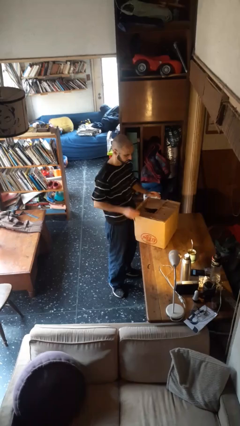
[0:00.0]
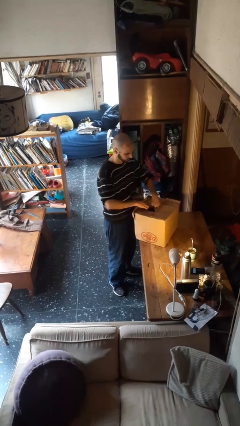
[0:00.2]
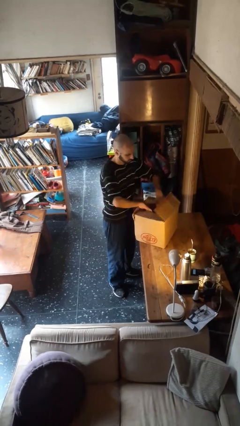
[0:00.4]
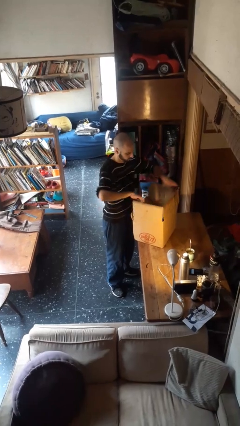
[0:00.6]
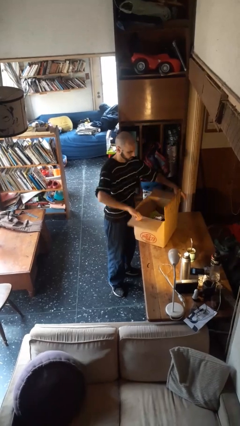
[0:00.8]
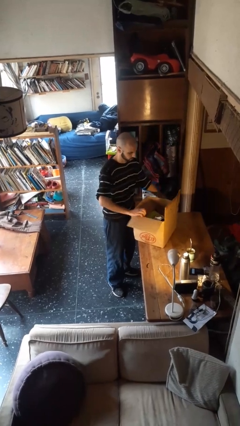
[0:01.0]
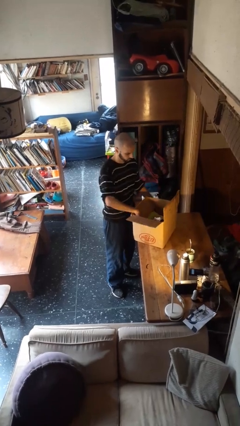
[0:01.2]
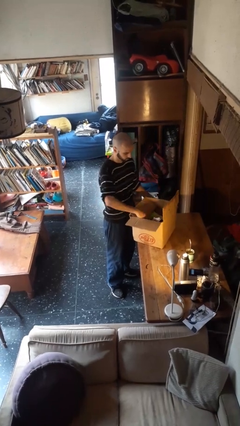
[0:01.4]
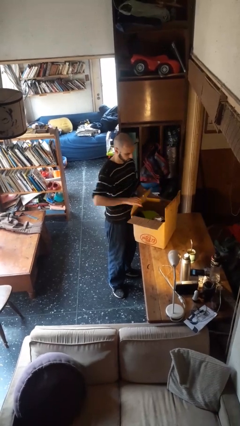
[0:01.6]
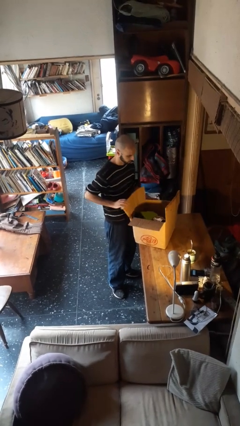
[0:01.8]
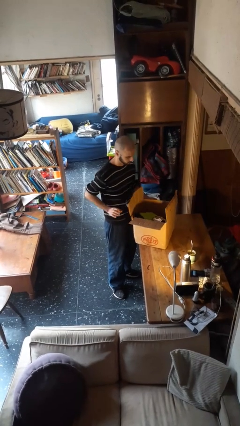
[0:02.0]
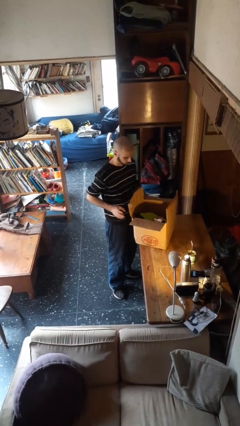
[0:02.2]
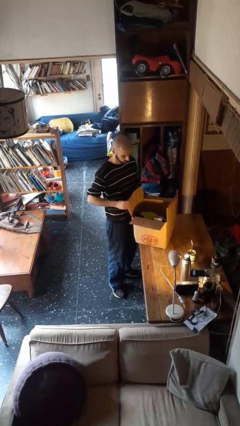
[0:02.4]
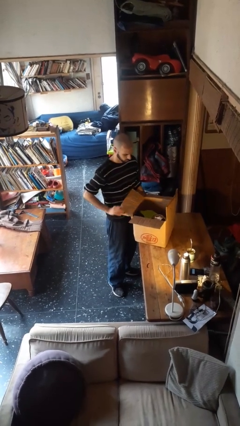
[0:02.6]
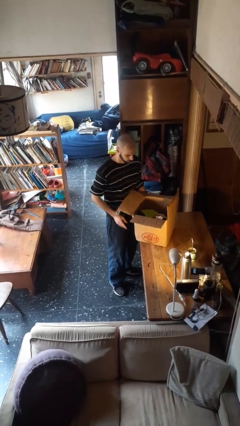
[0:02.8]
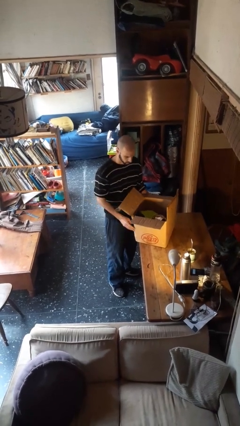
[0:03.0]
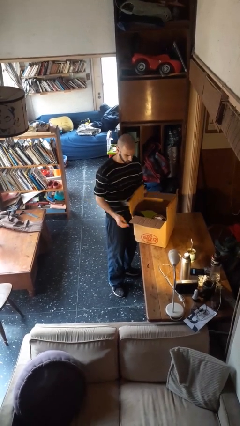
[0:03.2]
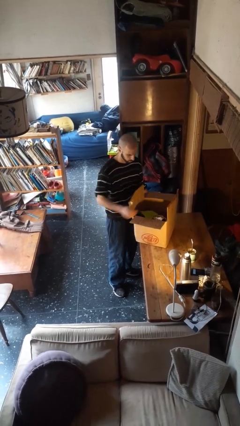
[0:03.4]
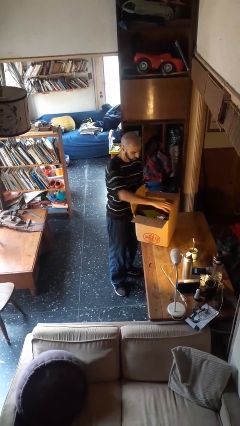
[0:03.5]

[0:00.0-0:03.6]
person opens box

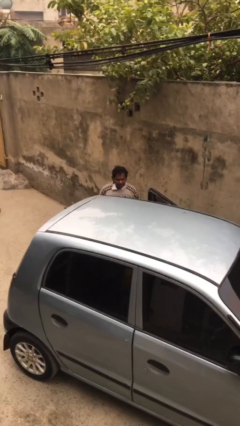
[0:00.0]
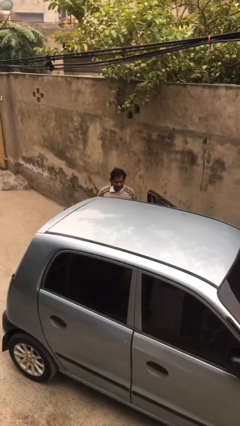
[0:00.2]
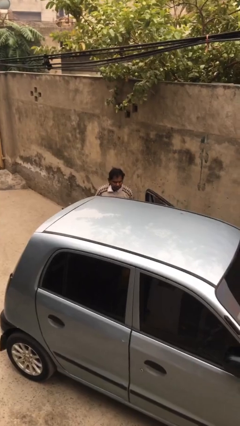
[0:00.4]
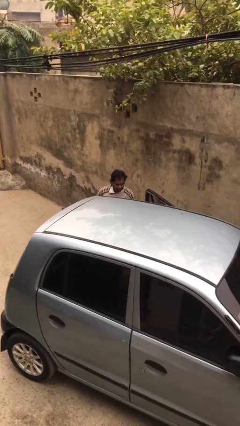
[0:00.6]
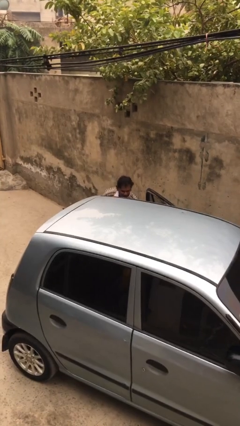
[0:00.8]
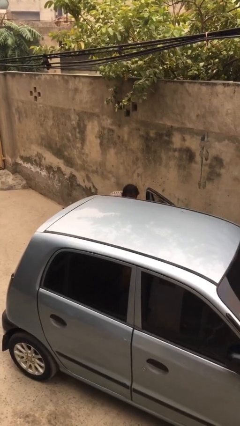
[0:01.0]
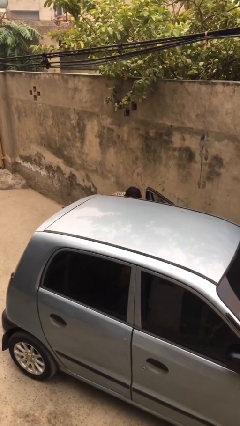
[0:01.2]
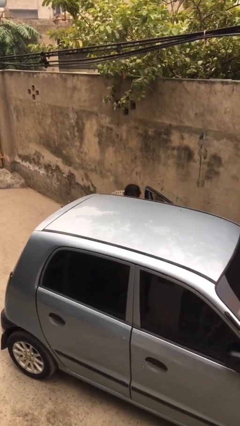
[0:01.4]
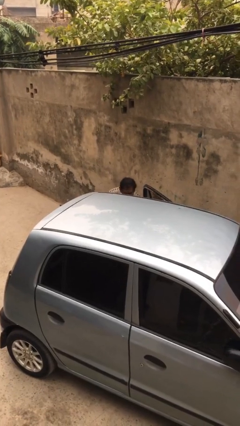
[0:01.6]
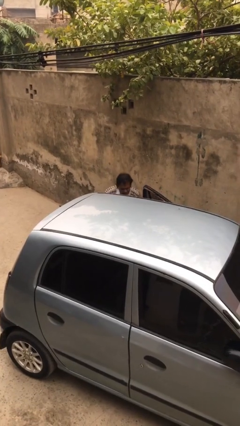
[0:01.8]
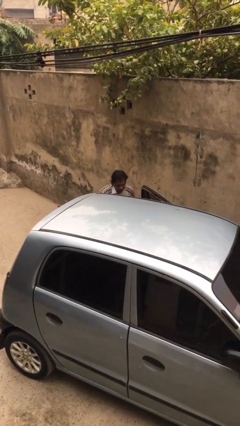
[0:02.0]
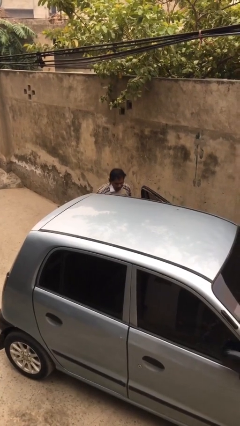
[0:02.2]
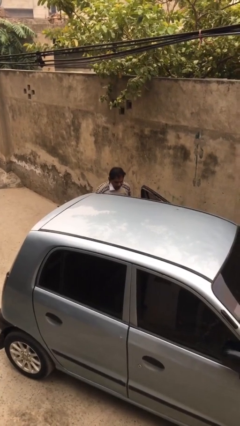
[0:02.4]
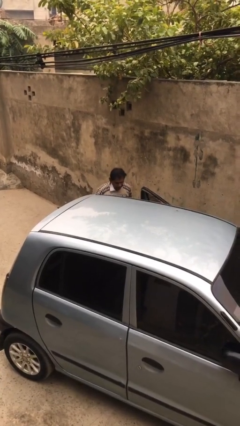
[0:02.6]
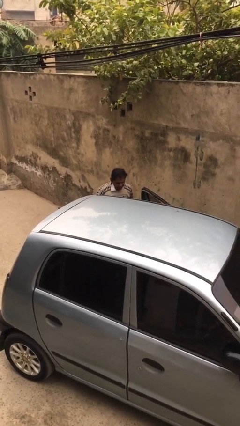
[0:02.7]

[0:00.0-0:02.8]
person loads car

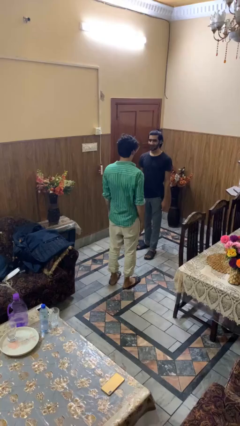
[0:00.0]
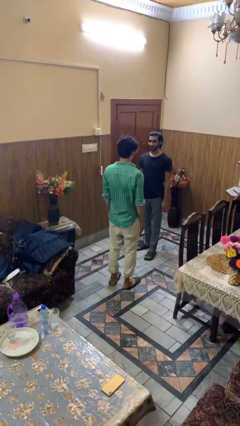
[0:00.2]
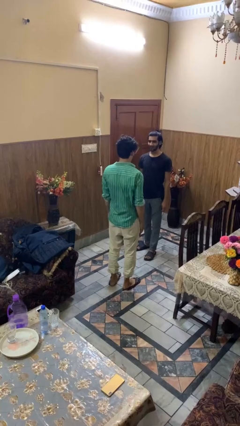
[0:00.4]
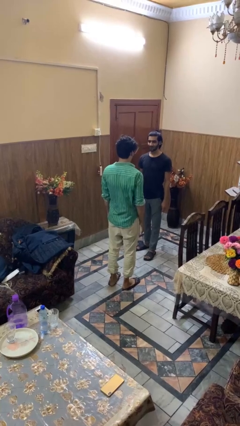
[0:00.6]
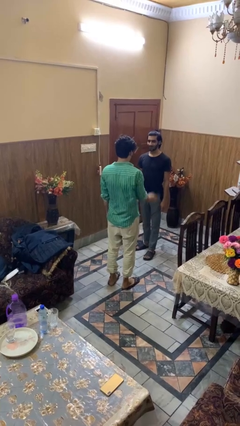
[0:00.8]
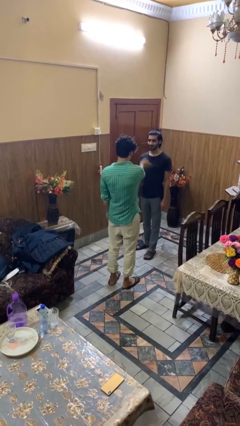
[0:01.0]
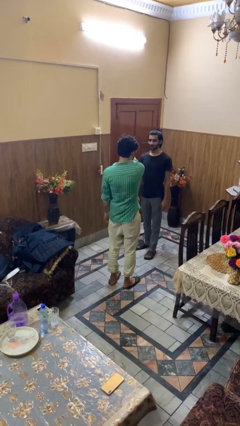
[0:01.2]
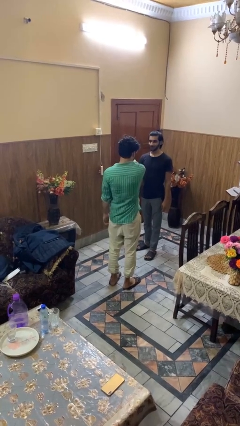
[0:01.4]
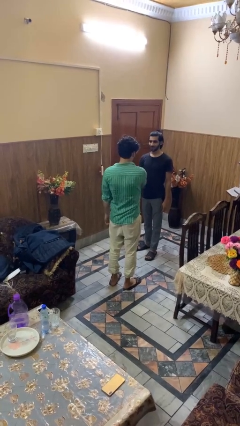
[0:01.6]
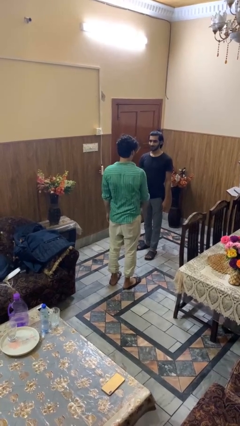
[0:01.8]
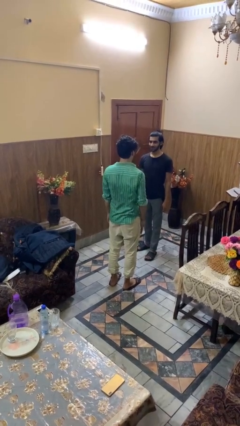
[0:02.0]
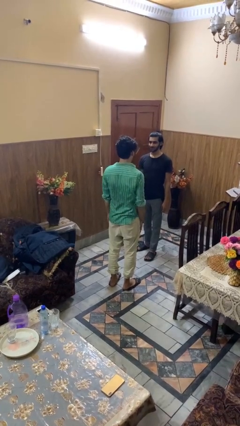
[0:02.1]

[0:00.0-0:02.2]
person shoves person

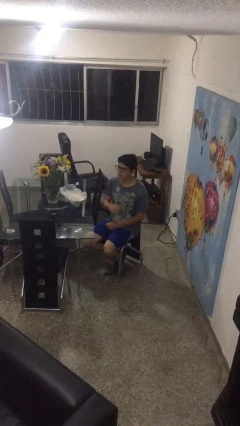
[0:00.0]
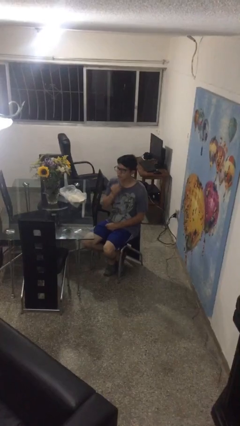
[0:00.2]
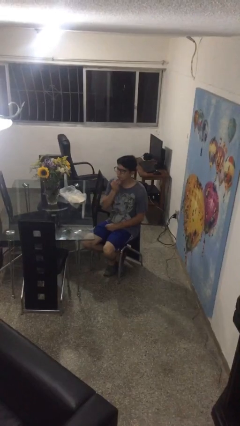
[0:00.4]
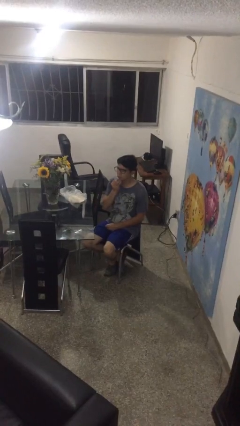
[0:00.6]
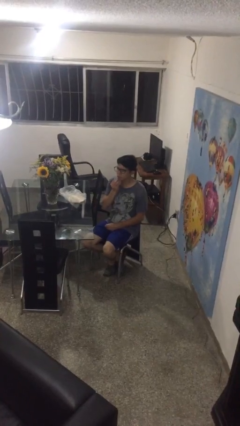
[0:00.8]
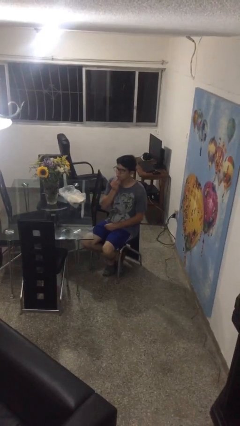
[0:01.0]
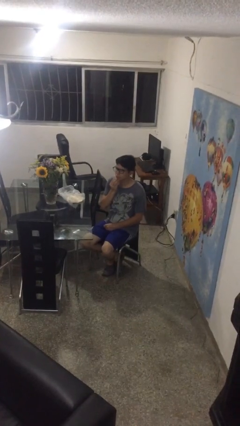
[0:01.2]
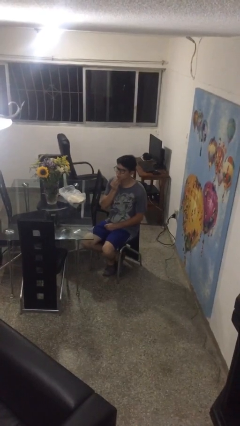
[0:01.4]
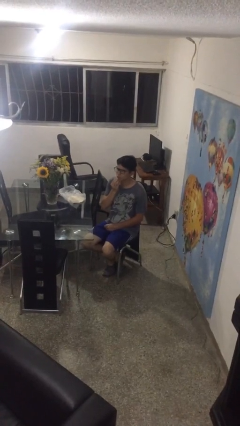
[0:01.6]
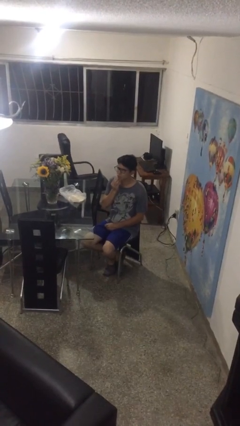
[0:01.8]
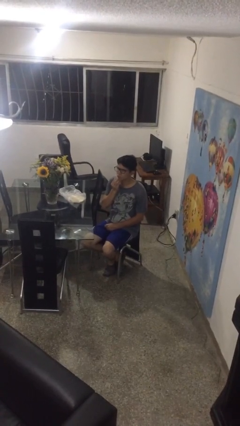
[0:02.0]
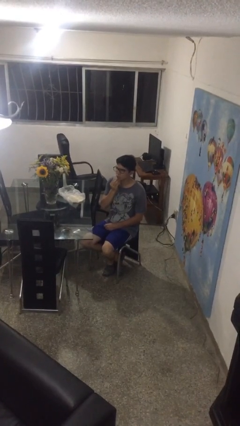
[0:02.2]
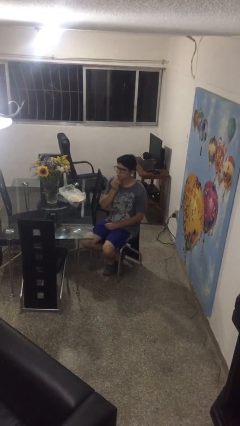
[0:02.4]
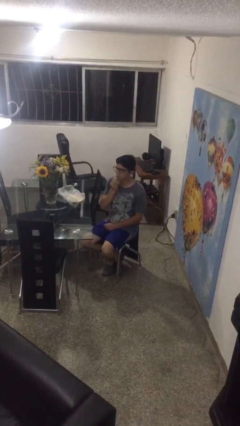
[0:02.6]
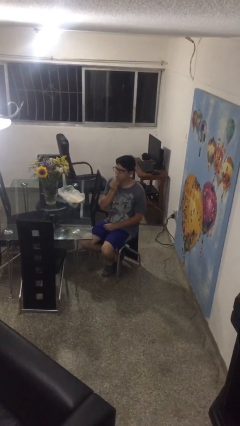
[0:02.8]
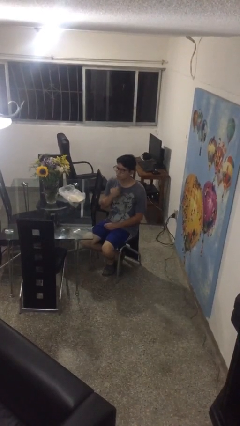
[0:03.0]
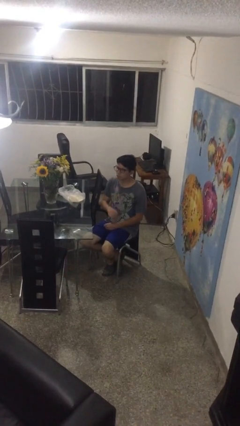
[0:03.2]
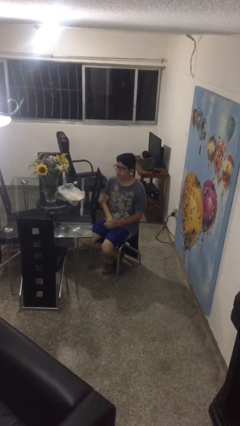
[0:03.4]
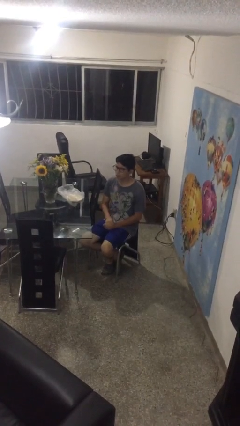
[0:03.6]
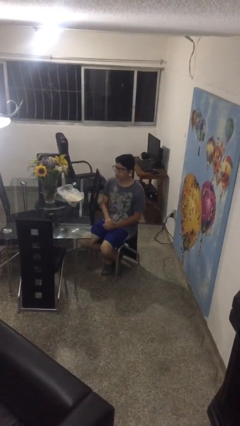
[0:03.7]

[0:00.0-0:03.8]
person strokes chin

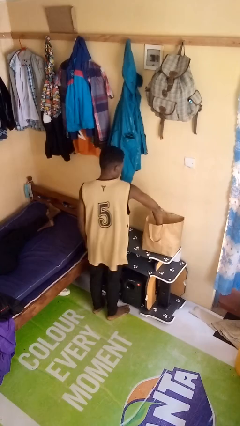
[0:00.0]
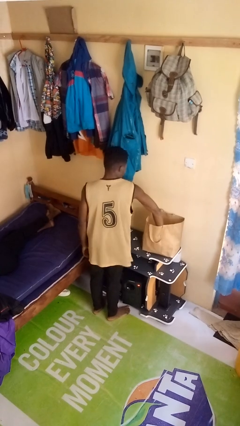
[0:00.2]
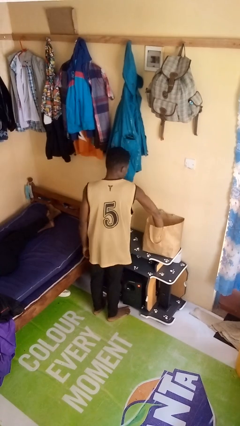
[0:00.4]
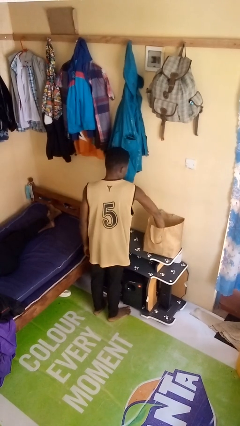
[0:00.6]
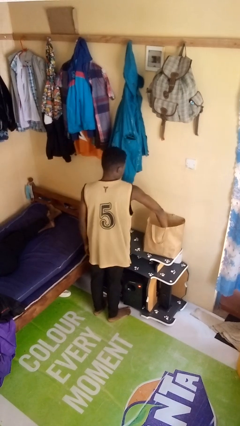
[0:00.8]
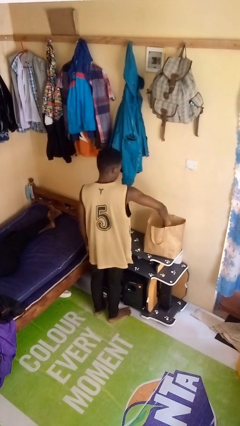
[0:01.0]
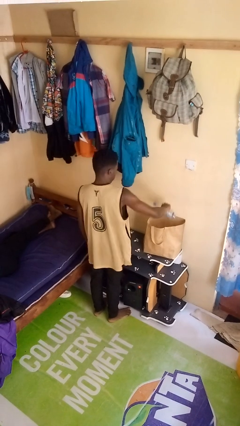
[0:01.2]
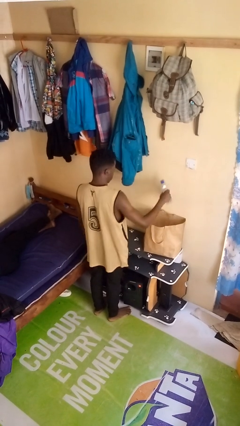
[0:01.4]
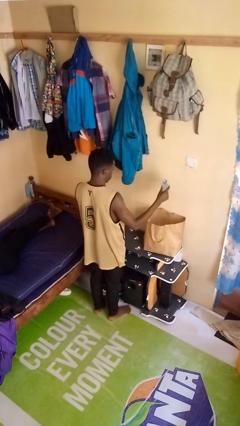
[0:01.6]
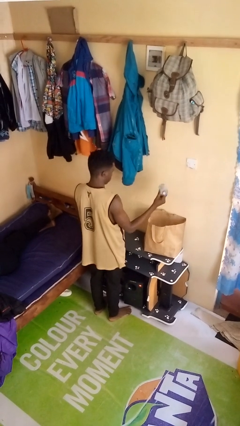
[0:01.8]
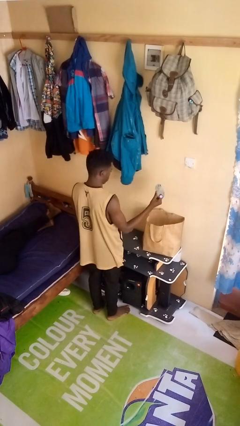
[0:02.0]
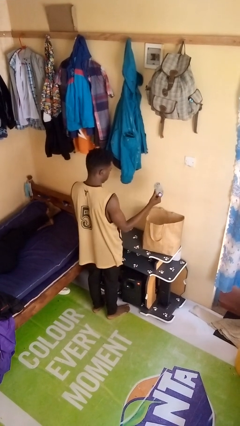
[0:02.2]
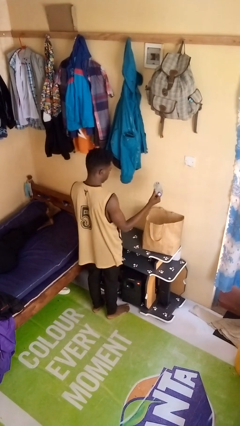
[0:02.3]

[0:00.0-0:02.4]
person takes object from bag

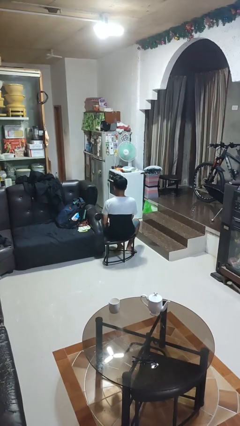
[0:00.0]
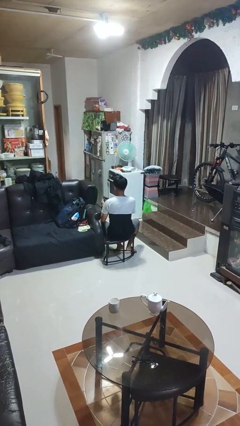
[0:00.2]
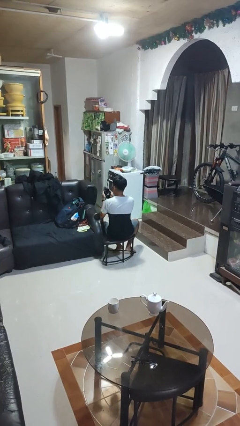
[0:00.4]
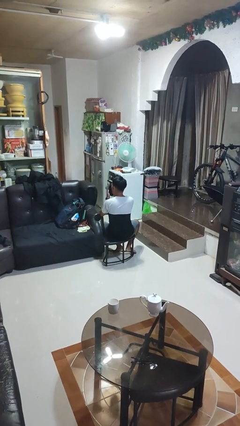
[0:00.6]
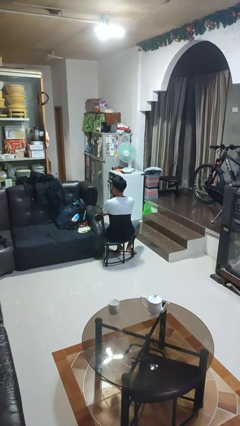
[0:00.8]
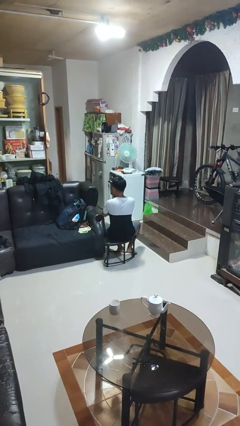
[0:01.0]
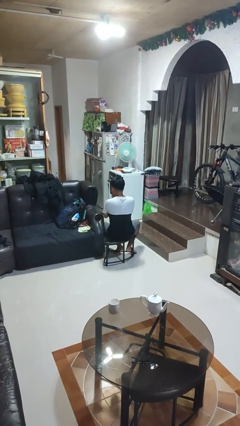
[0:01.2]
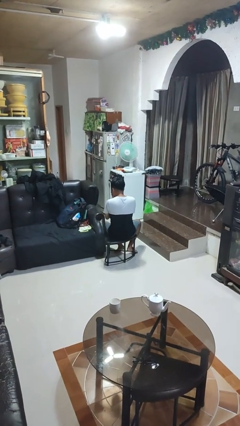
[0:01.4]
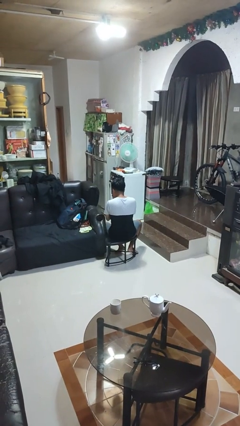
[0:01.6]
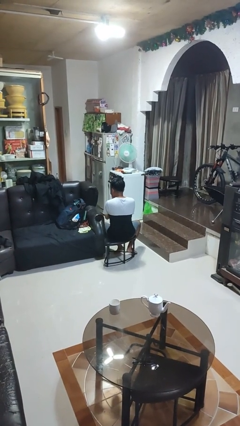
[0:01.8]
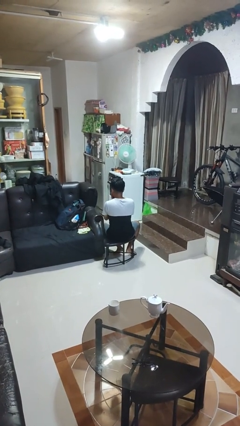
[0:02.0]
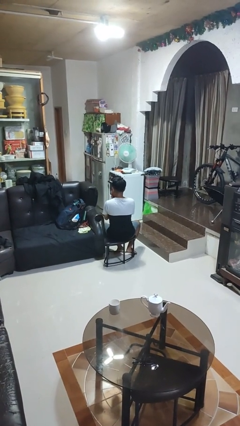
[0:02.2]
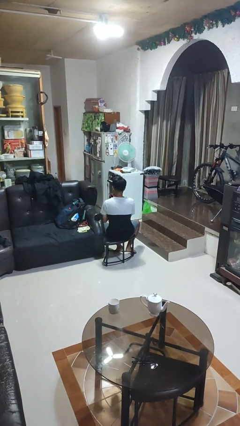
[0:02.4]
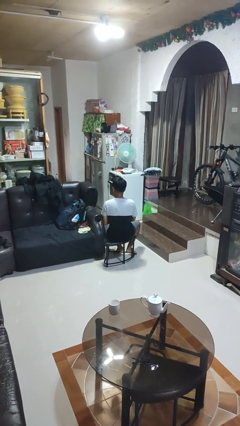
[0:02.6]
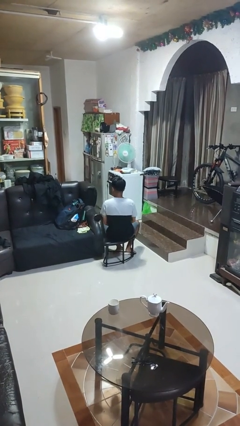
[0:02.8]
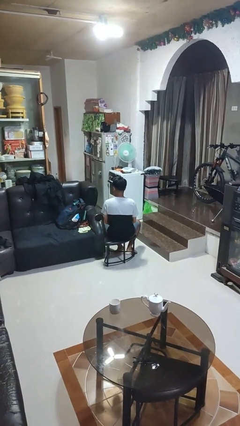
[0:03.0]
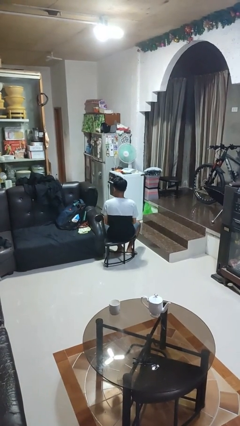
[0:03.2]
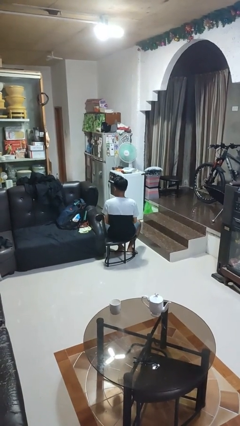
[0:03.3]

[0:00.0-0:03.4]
person dries hair with hairdryer
